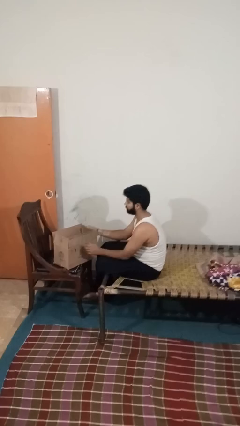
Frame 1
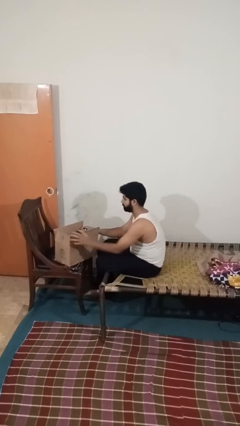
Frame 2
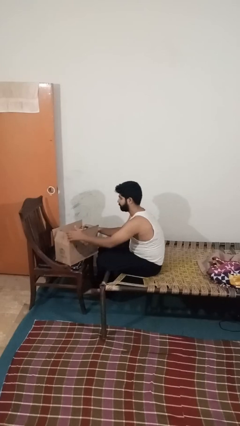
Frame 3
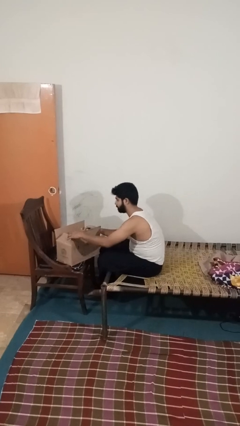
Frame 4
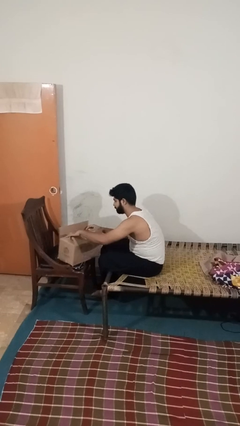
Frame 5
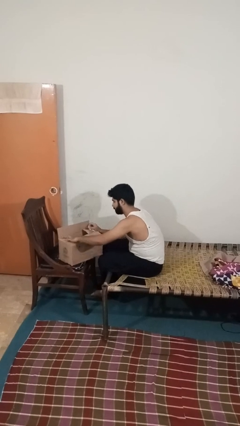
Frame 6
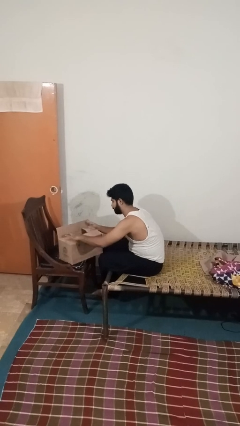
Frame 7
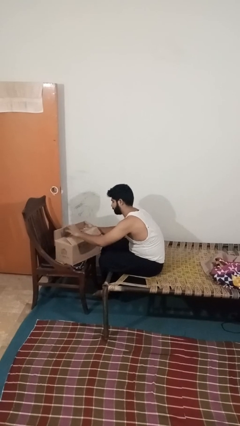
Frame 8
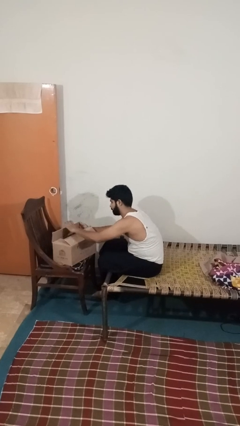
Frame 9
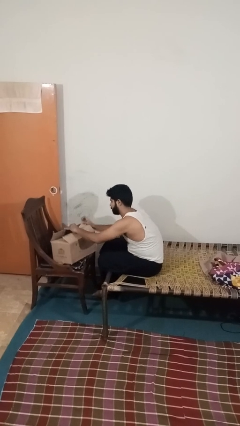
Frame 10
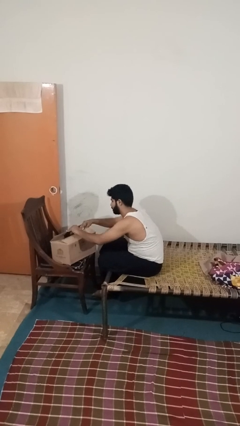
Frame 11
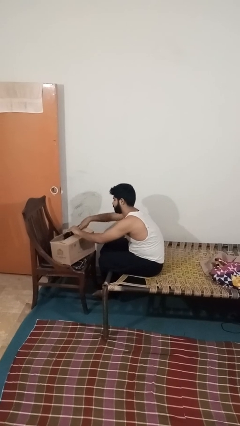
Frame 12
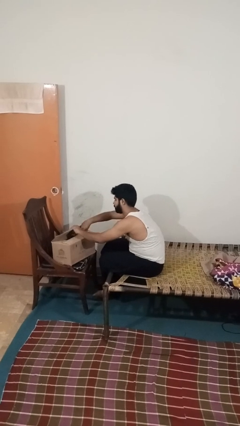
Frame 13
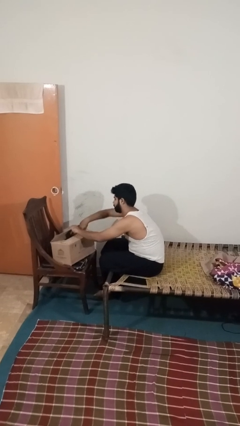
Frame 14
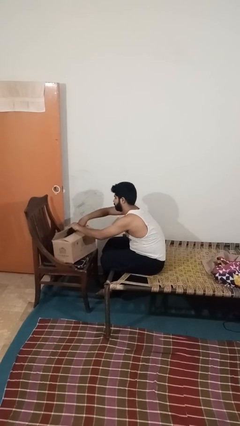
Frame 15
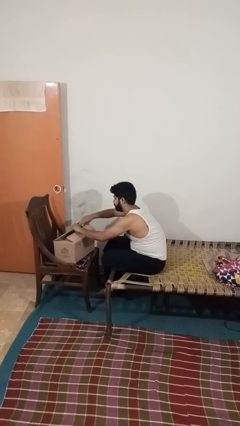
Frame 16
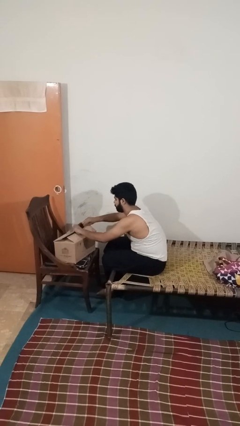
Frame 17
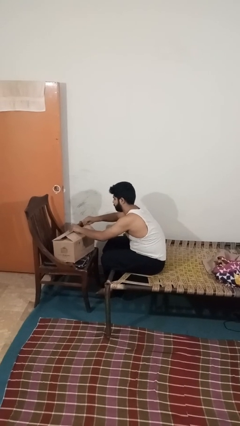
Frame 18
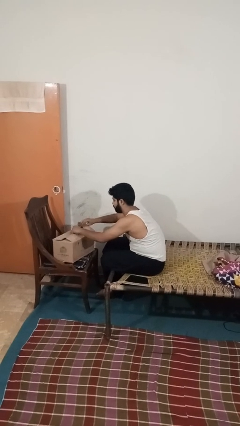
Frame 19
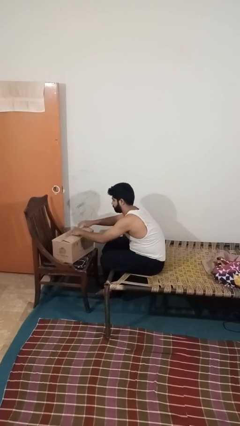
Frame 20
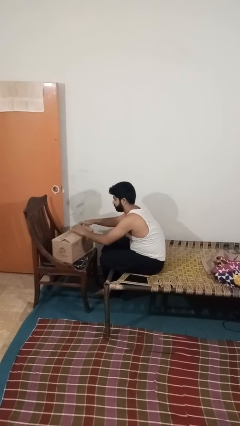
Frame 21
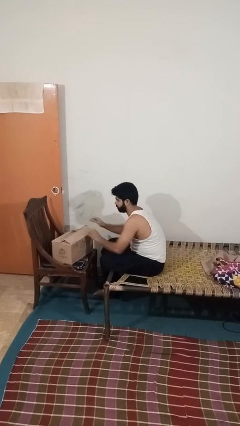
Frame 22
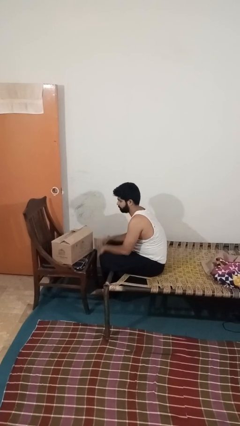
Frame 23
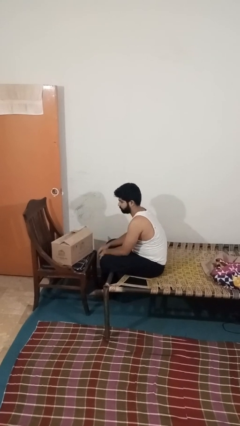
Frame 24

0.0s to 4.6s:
person closes box

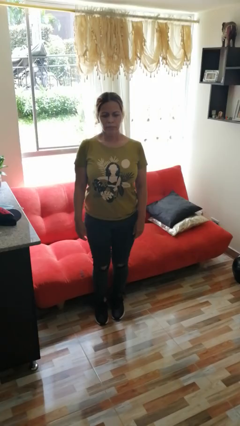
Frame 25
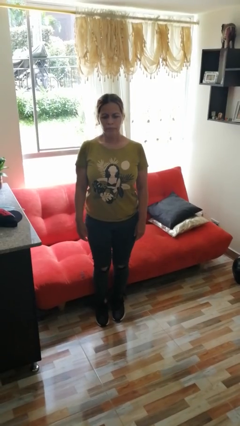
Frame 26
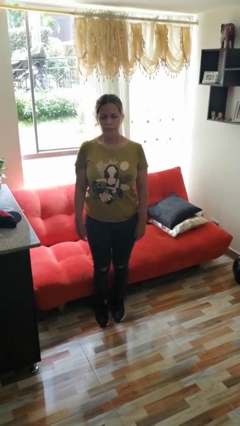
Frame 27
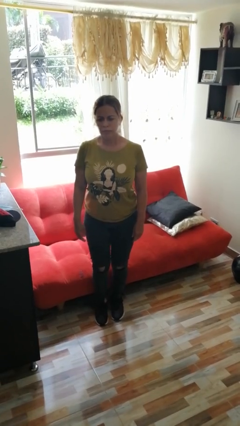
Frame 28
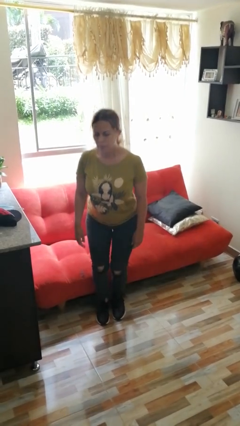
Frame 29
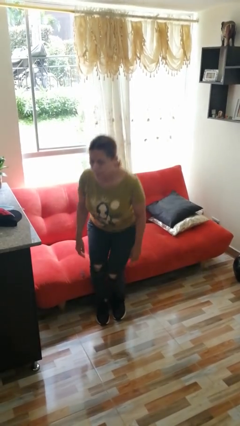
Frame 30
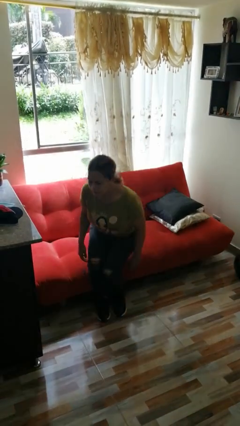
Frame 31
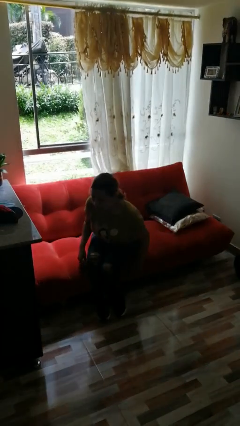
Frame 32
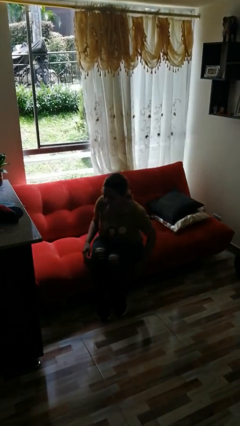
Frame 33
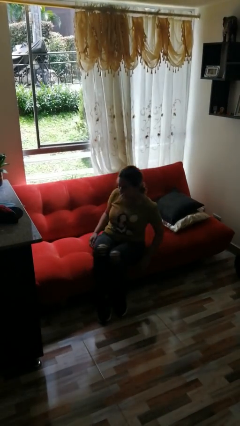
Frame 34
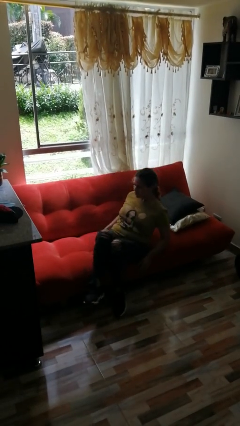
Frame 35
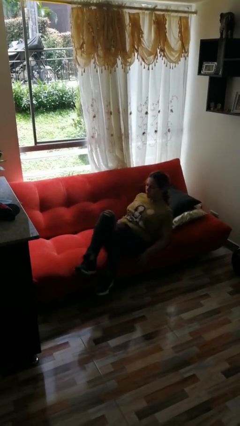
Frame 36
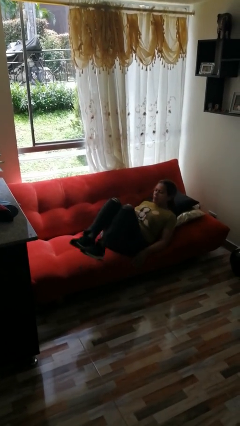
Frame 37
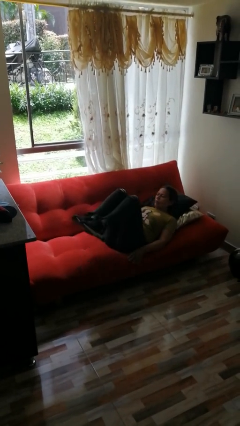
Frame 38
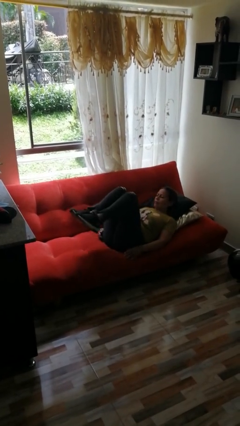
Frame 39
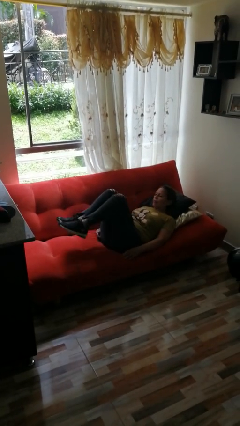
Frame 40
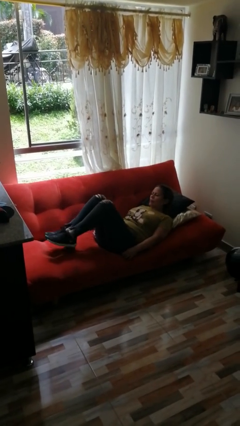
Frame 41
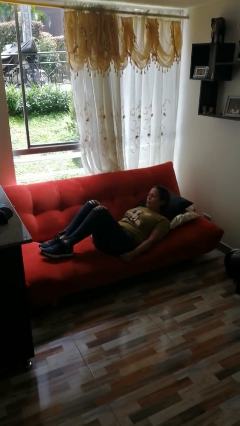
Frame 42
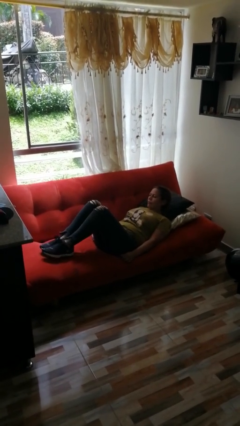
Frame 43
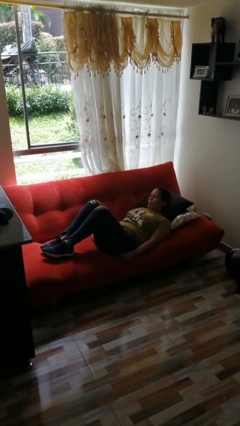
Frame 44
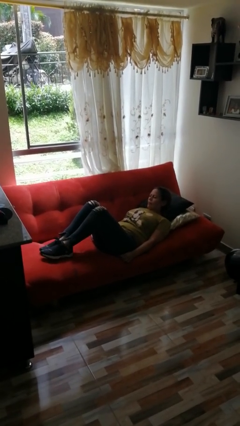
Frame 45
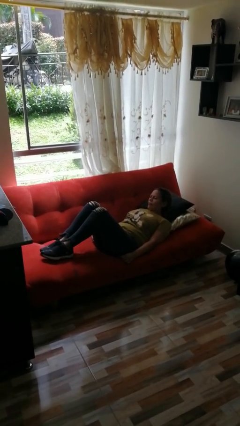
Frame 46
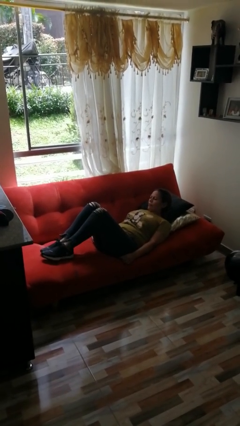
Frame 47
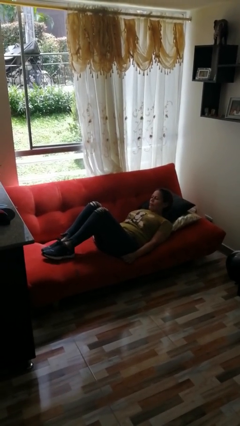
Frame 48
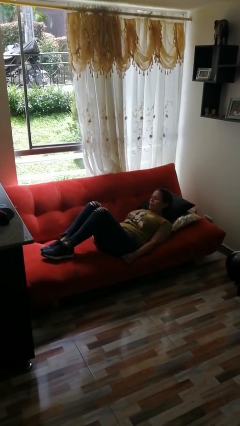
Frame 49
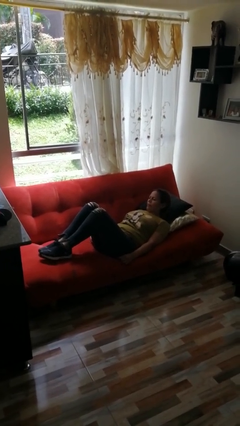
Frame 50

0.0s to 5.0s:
person lies down on couch

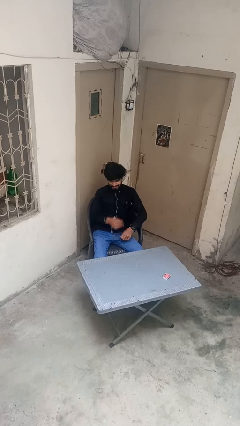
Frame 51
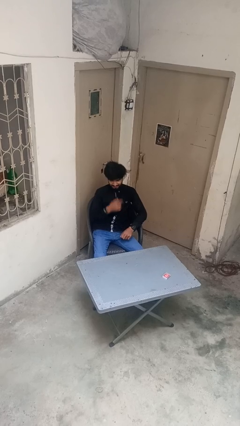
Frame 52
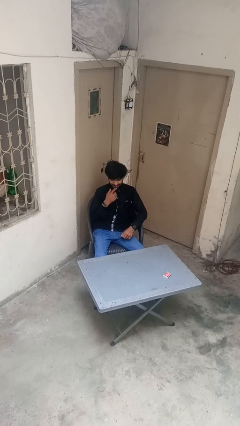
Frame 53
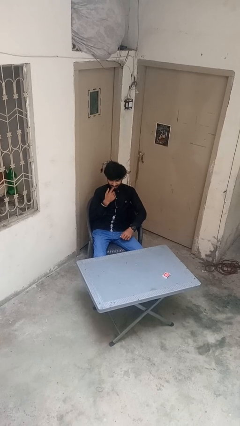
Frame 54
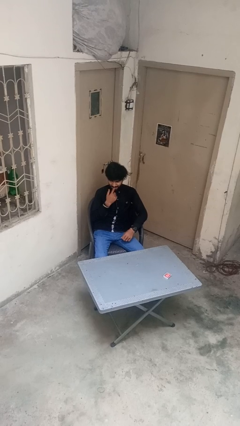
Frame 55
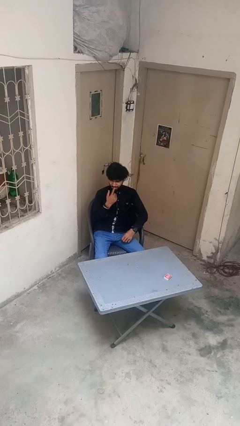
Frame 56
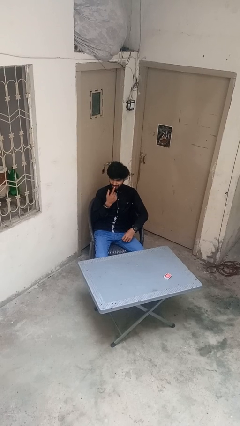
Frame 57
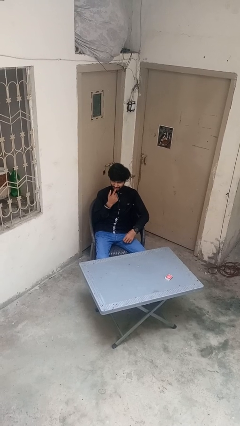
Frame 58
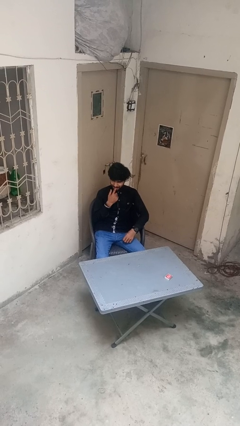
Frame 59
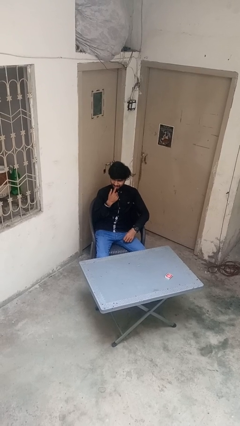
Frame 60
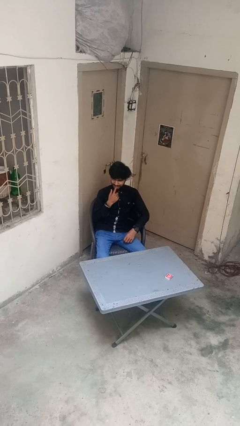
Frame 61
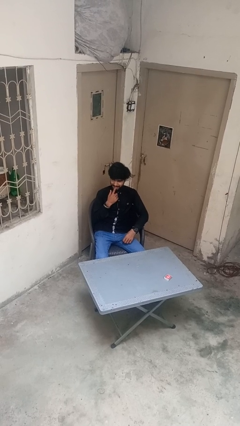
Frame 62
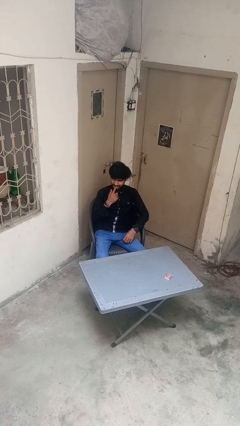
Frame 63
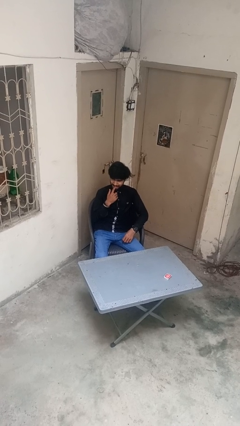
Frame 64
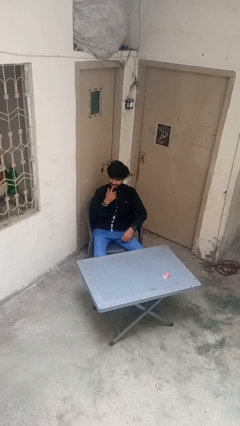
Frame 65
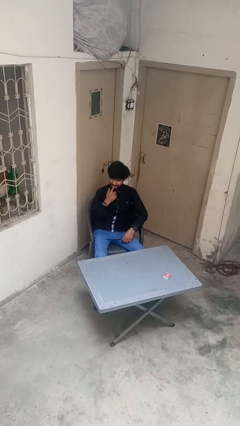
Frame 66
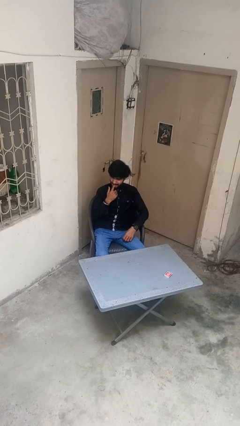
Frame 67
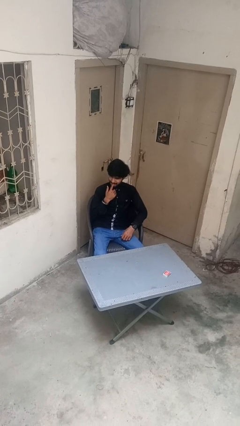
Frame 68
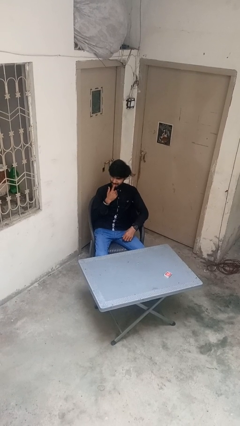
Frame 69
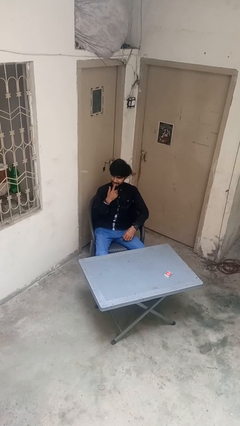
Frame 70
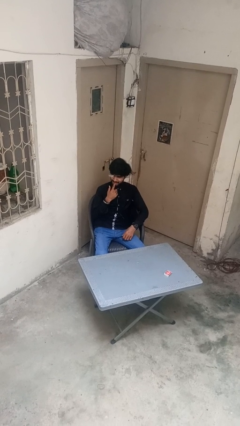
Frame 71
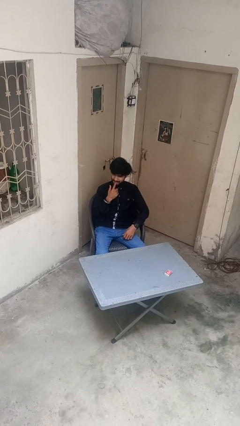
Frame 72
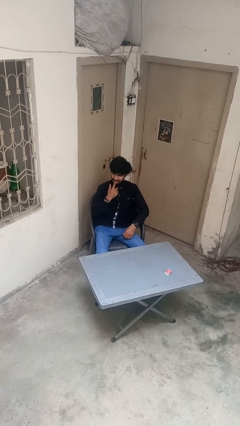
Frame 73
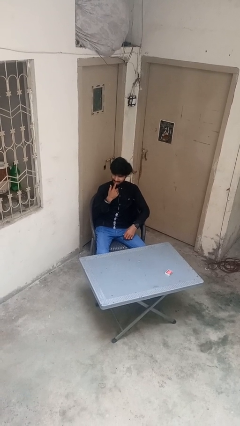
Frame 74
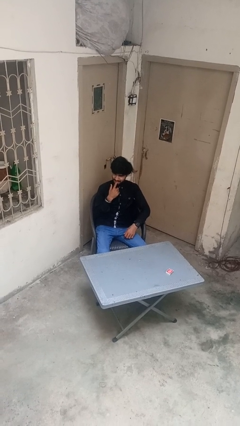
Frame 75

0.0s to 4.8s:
person licks fingers

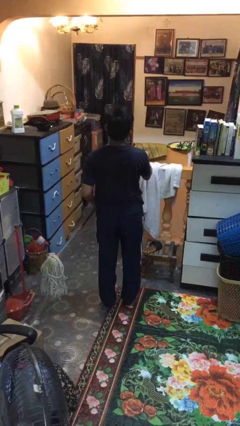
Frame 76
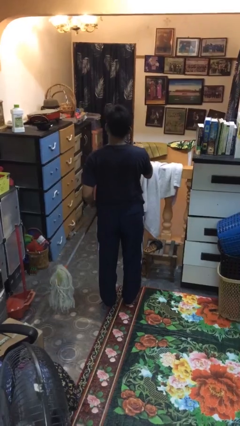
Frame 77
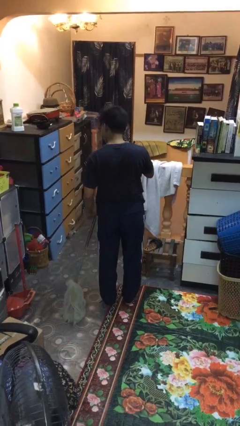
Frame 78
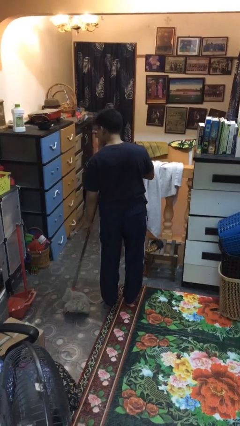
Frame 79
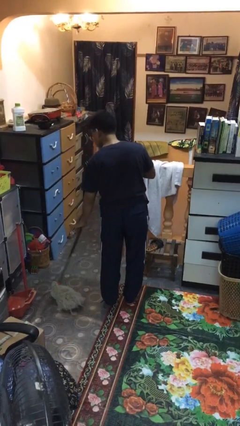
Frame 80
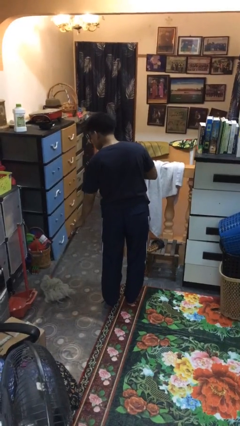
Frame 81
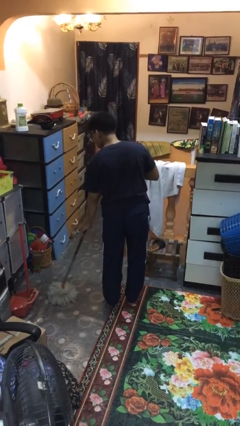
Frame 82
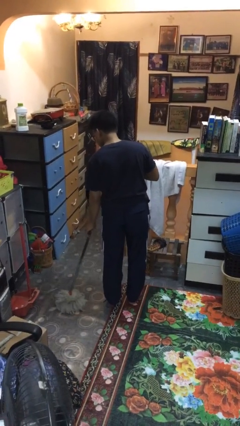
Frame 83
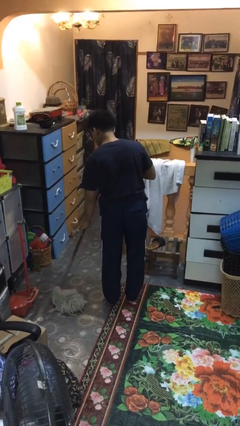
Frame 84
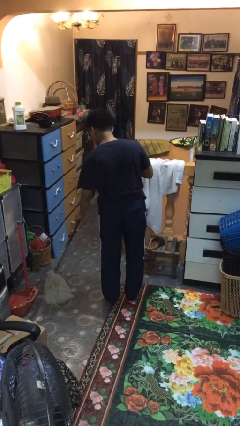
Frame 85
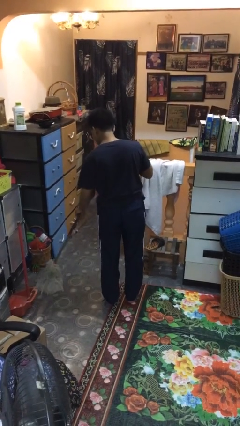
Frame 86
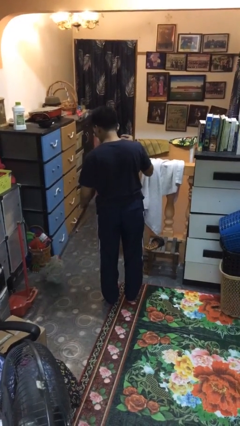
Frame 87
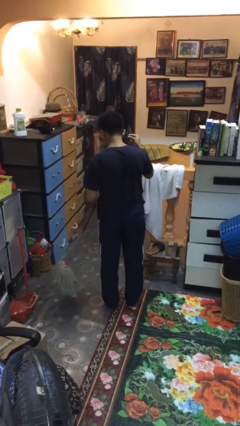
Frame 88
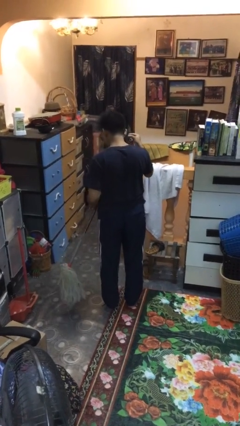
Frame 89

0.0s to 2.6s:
person mops

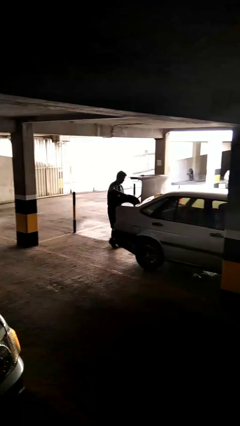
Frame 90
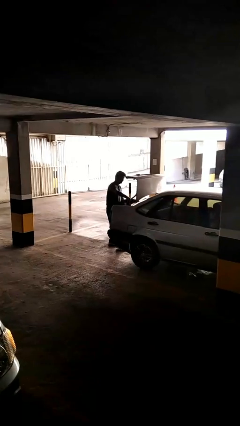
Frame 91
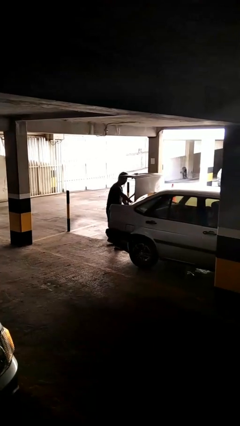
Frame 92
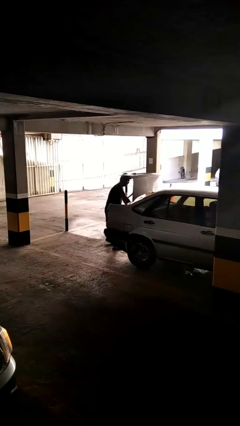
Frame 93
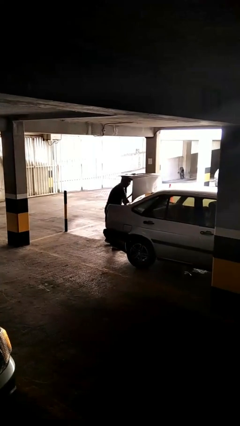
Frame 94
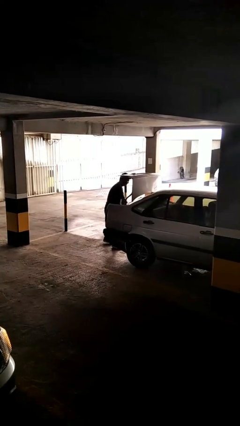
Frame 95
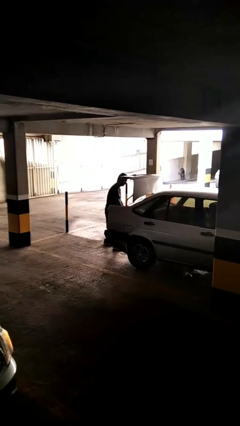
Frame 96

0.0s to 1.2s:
person loads car
